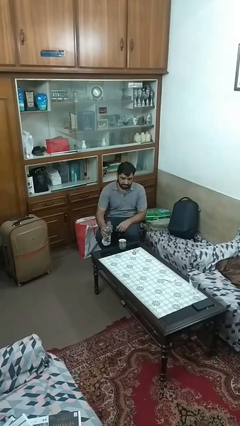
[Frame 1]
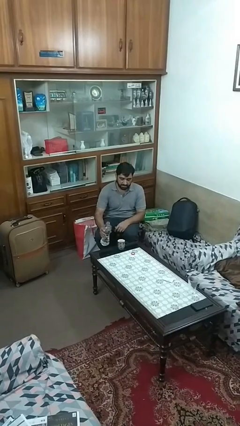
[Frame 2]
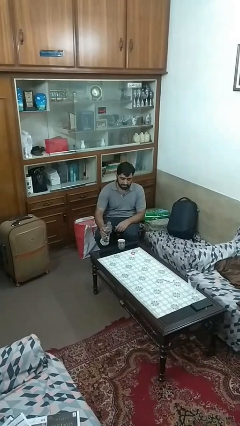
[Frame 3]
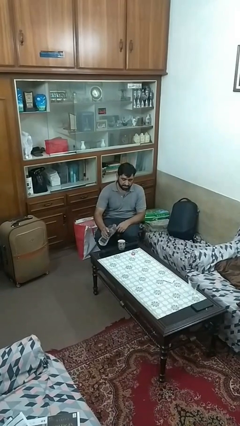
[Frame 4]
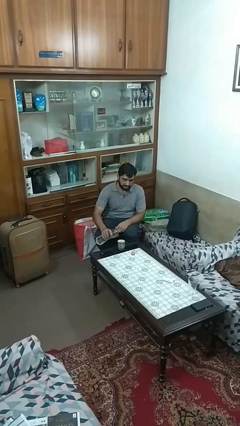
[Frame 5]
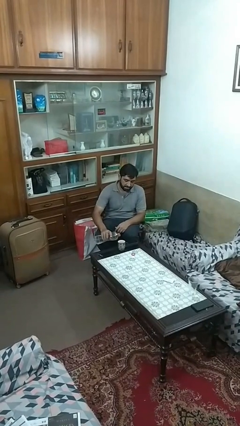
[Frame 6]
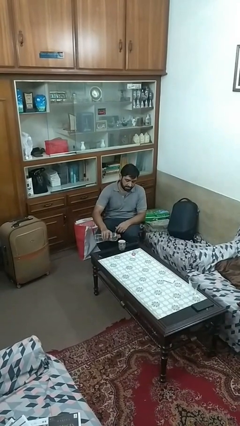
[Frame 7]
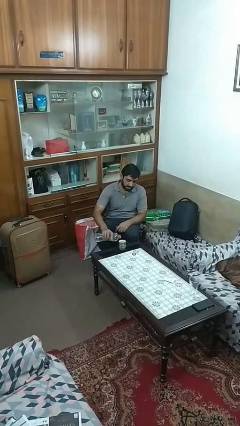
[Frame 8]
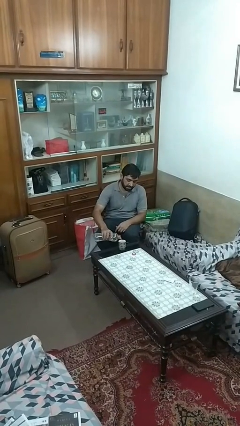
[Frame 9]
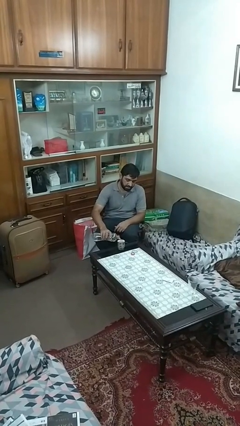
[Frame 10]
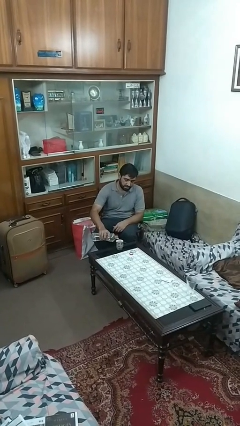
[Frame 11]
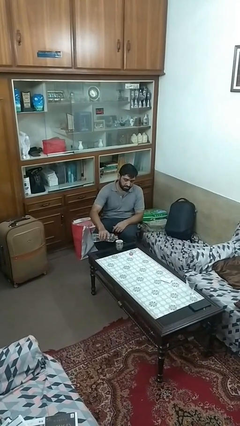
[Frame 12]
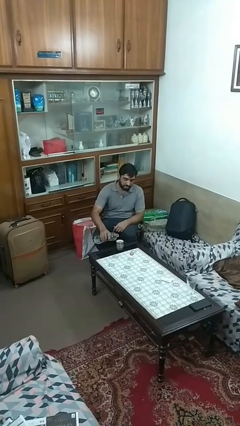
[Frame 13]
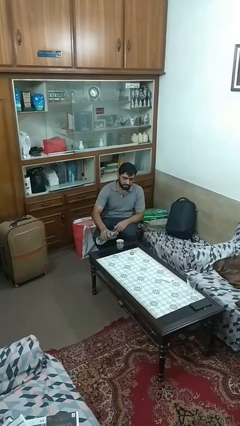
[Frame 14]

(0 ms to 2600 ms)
person pours liquid into cup

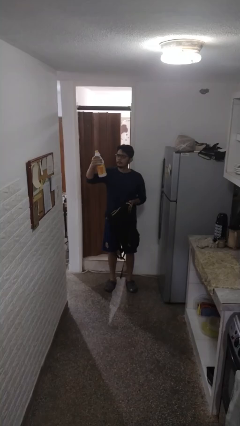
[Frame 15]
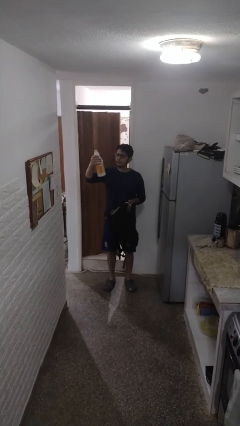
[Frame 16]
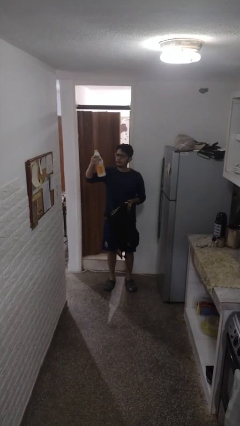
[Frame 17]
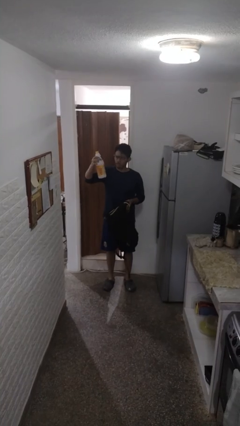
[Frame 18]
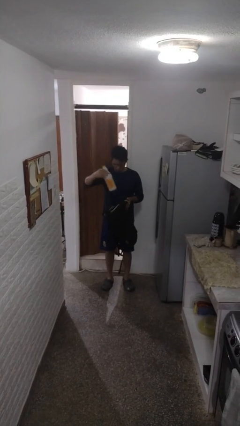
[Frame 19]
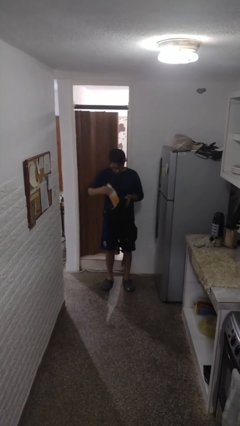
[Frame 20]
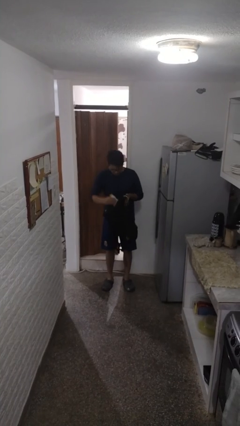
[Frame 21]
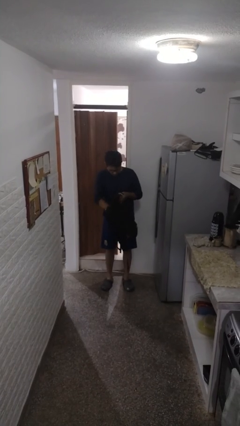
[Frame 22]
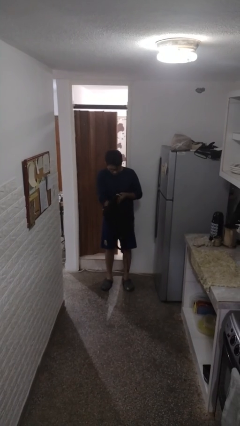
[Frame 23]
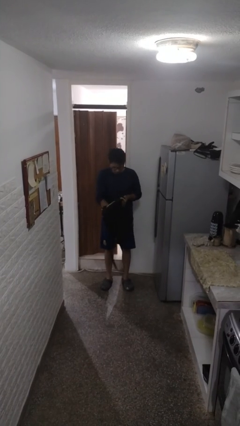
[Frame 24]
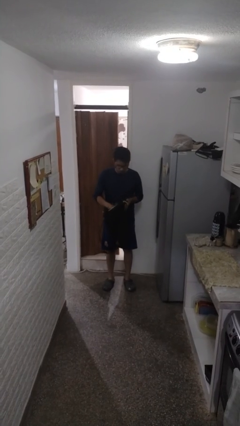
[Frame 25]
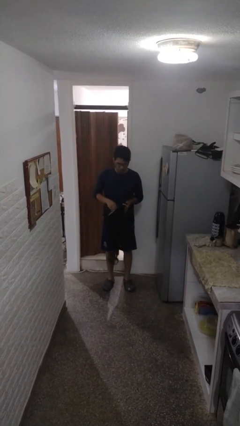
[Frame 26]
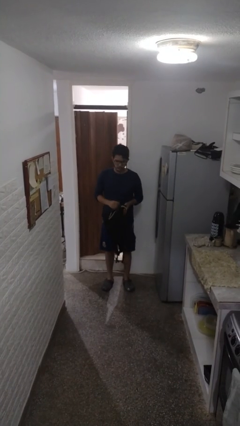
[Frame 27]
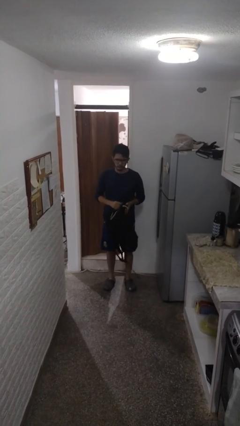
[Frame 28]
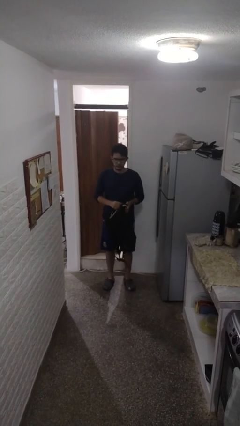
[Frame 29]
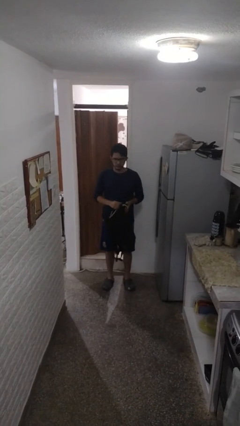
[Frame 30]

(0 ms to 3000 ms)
person puts object into backpack

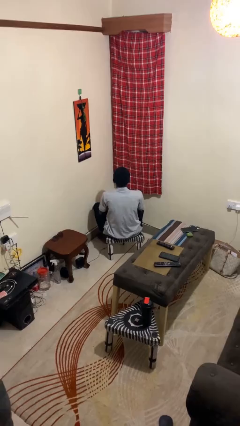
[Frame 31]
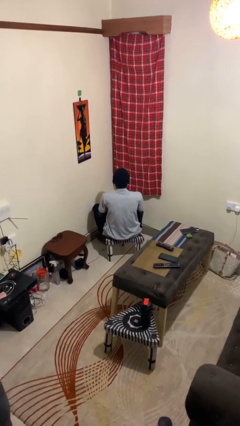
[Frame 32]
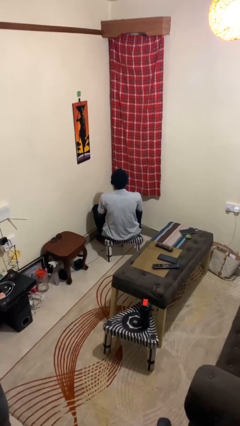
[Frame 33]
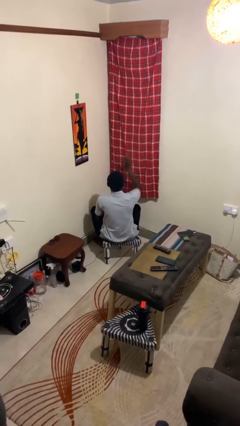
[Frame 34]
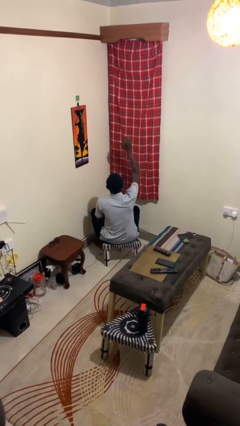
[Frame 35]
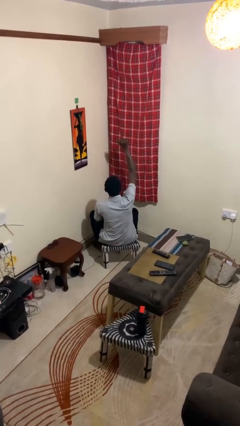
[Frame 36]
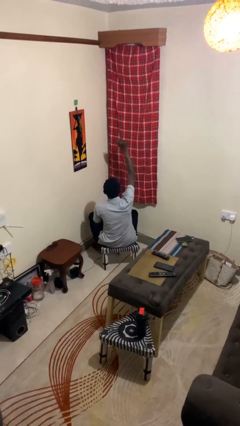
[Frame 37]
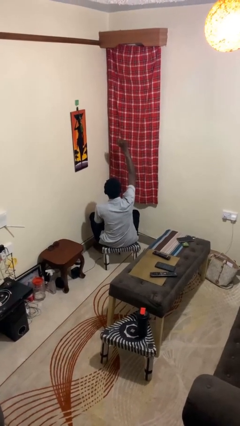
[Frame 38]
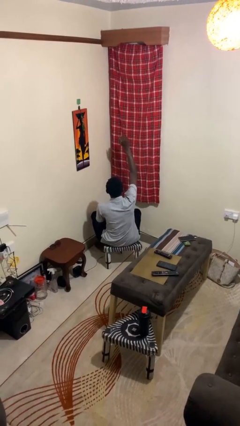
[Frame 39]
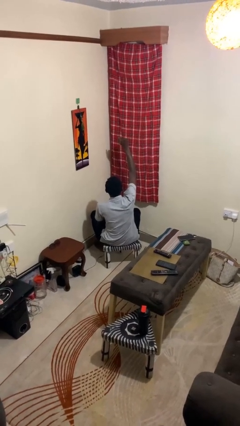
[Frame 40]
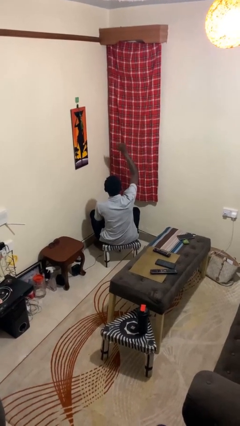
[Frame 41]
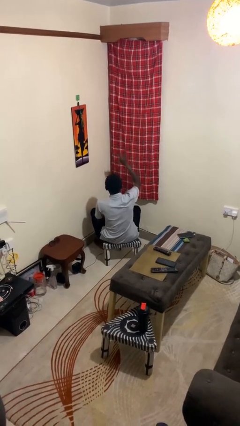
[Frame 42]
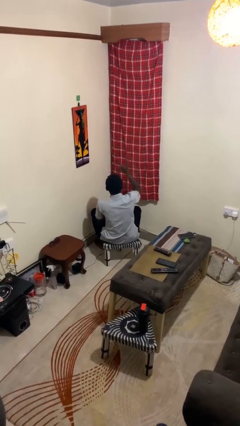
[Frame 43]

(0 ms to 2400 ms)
person gestures come here

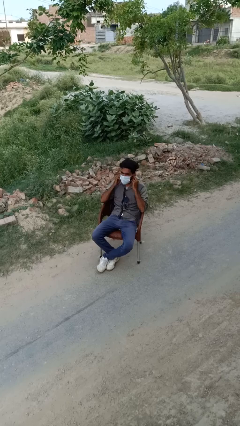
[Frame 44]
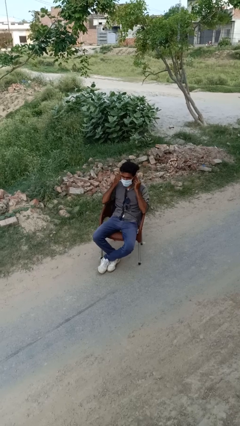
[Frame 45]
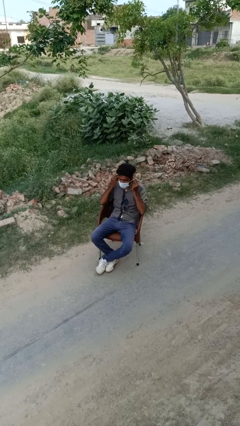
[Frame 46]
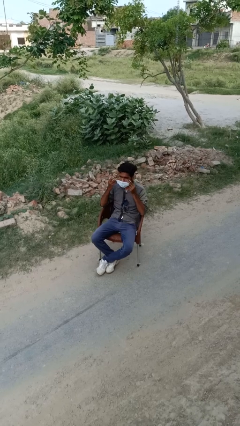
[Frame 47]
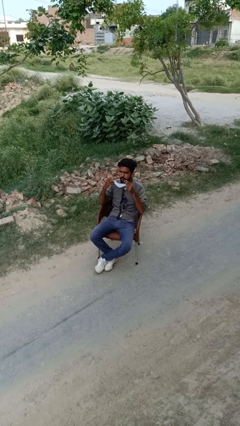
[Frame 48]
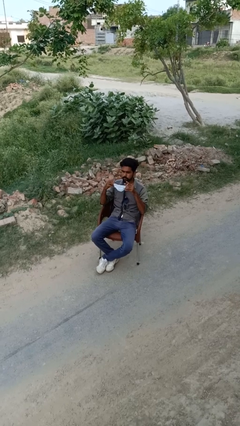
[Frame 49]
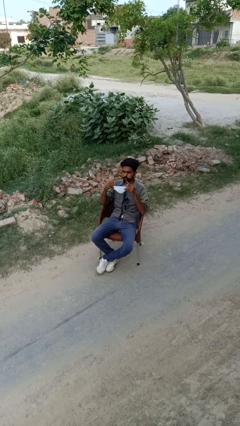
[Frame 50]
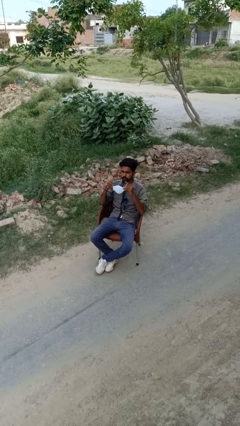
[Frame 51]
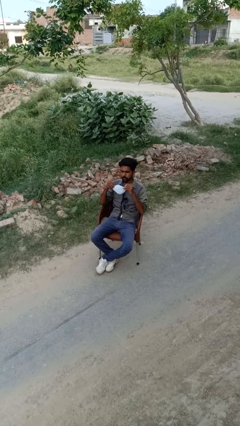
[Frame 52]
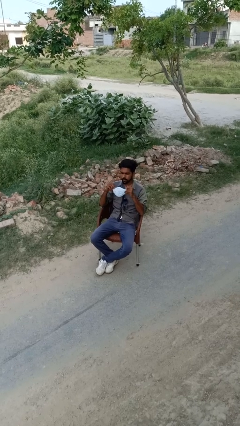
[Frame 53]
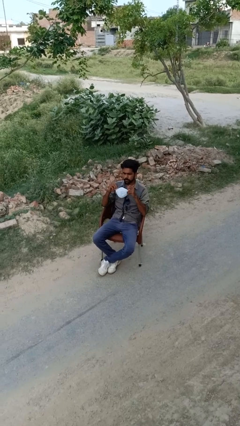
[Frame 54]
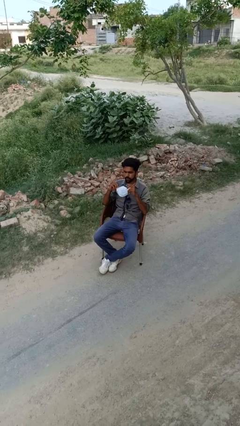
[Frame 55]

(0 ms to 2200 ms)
person takes off facemask

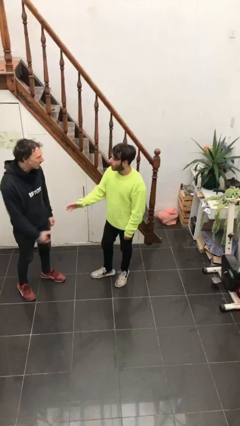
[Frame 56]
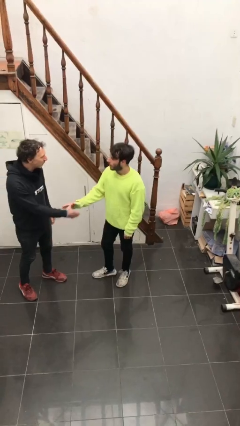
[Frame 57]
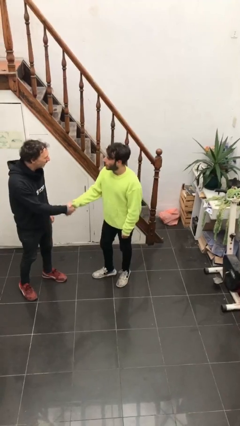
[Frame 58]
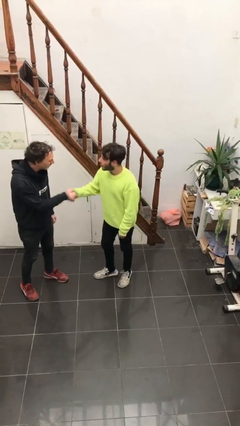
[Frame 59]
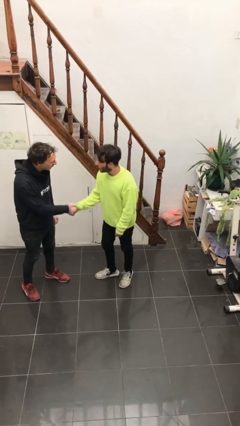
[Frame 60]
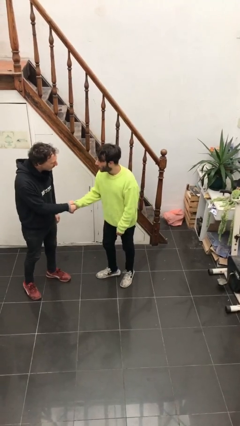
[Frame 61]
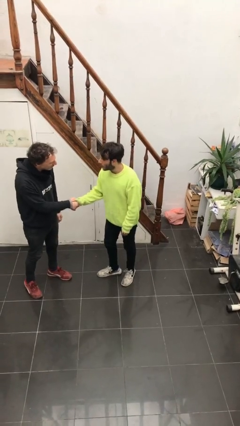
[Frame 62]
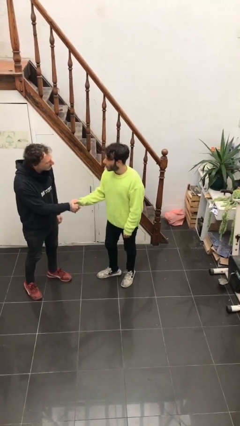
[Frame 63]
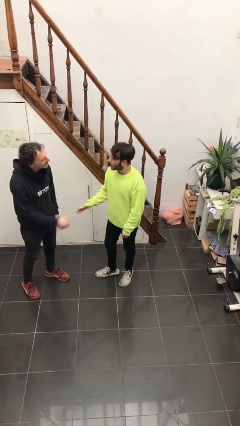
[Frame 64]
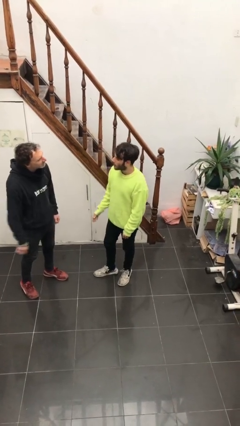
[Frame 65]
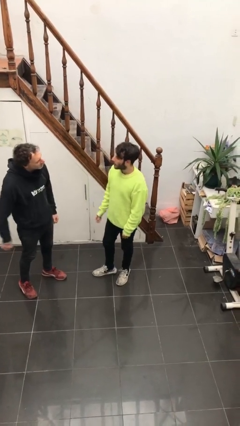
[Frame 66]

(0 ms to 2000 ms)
person shakes hand

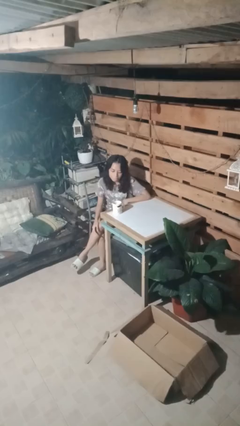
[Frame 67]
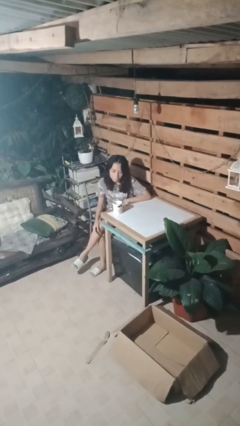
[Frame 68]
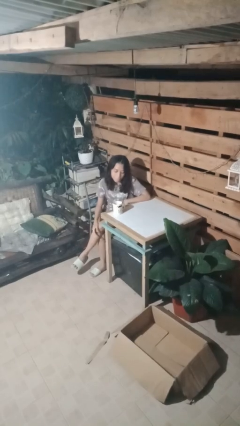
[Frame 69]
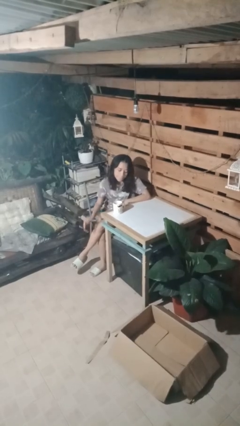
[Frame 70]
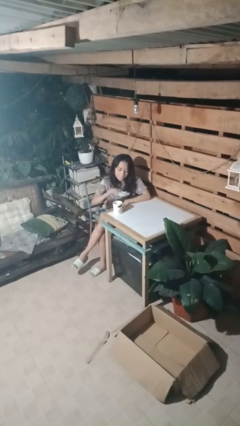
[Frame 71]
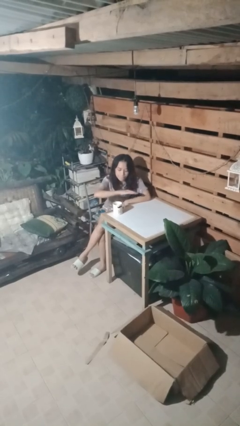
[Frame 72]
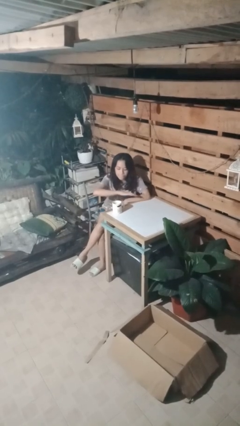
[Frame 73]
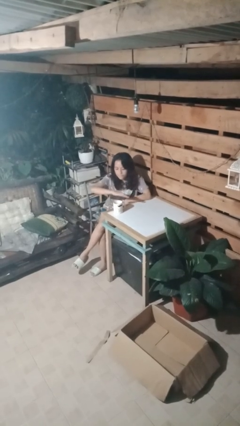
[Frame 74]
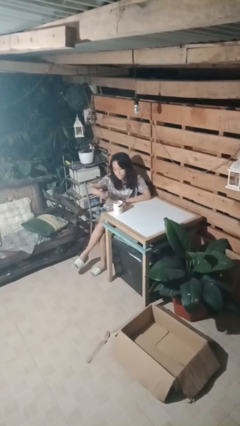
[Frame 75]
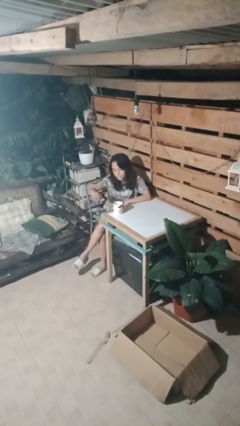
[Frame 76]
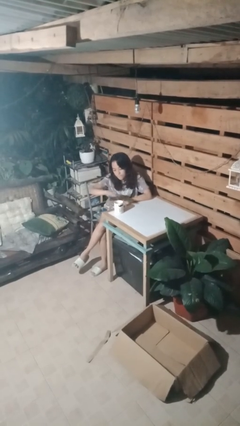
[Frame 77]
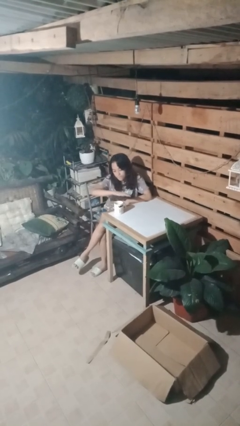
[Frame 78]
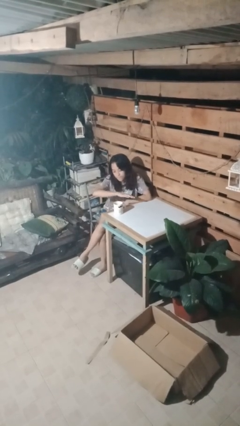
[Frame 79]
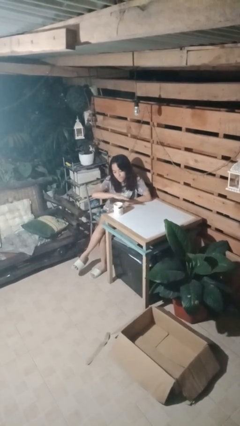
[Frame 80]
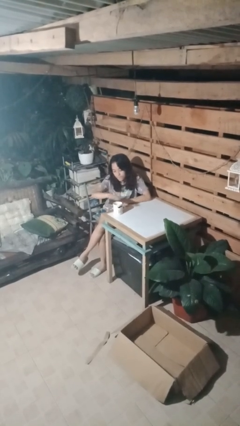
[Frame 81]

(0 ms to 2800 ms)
person waves hand over object

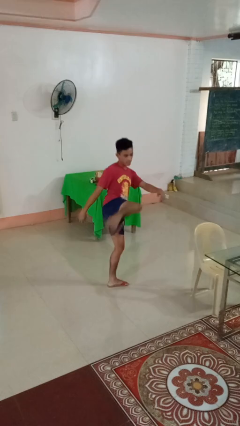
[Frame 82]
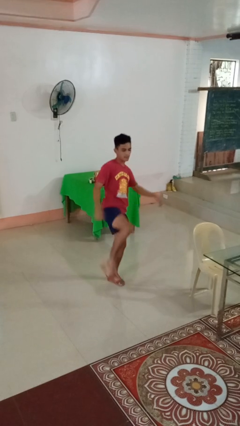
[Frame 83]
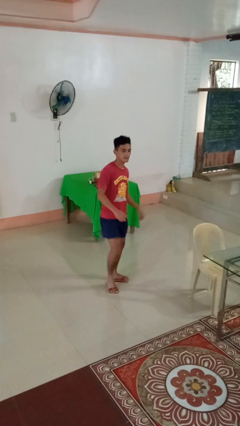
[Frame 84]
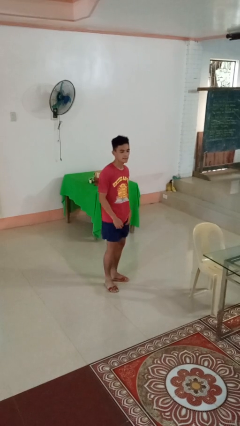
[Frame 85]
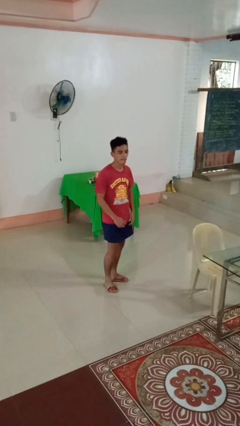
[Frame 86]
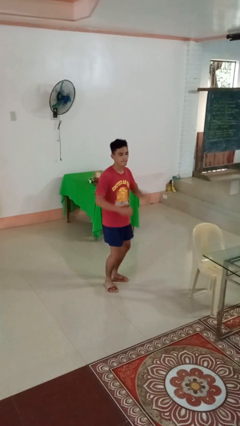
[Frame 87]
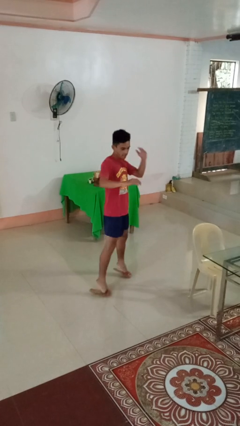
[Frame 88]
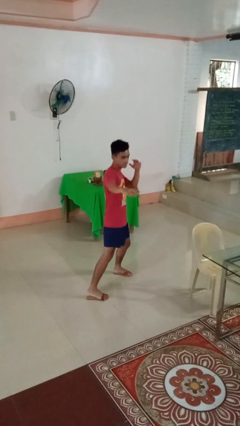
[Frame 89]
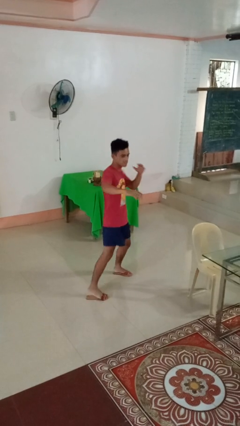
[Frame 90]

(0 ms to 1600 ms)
person karate kicks

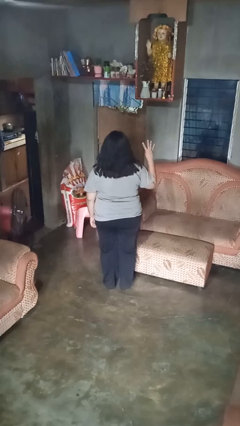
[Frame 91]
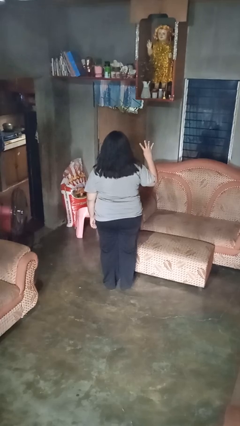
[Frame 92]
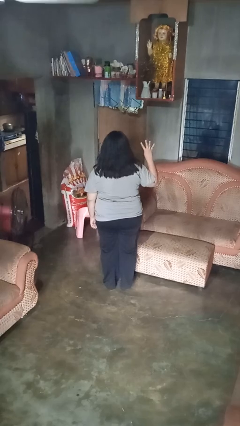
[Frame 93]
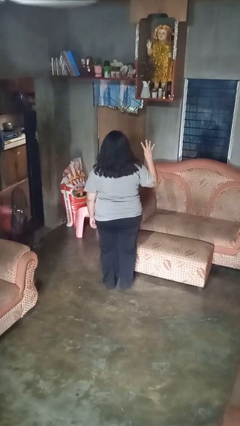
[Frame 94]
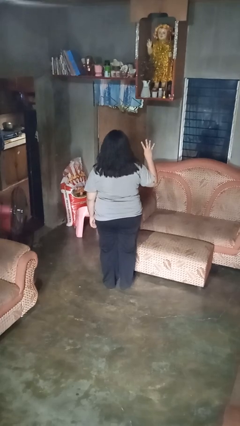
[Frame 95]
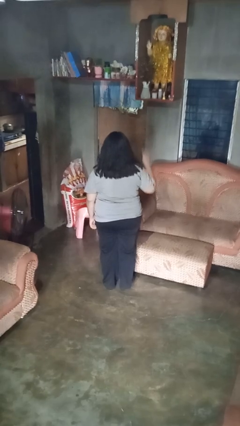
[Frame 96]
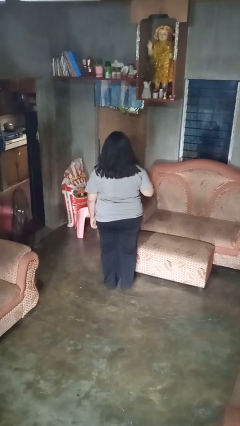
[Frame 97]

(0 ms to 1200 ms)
person gestures number four
